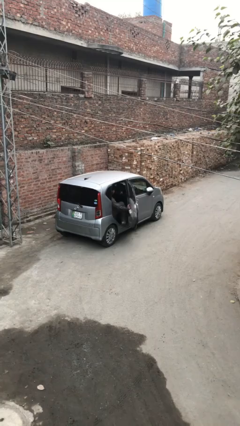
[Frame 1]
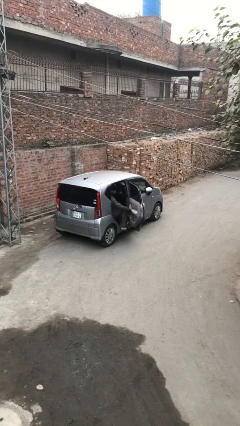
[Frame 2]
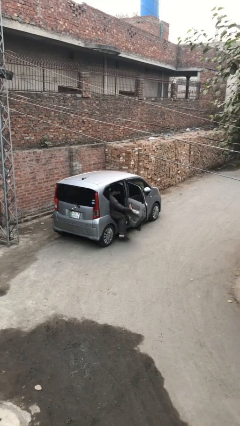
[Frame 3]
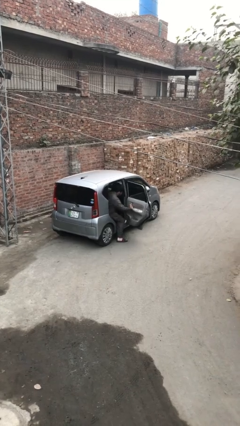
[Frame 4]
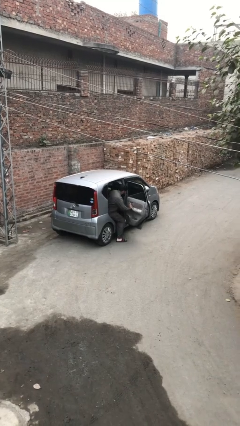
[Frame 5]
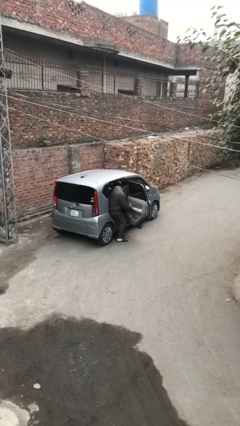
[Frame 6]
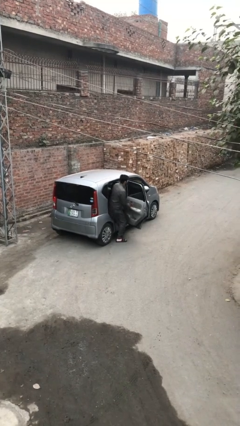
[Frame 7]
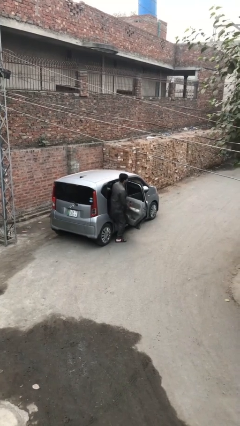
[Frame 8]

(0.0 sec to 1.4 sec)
person opens car door

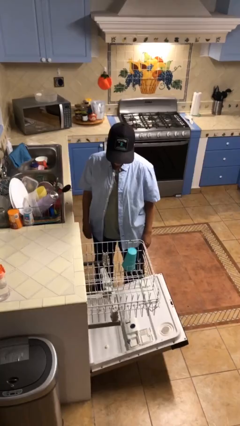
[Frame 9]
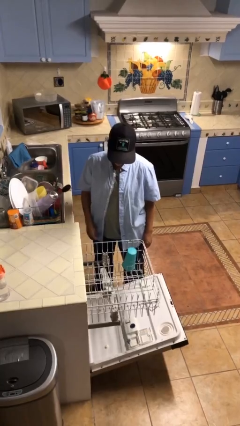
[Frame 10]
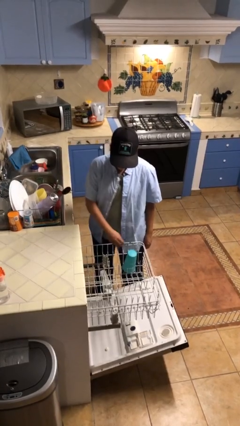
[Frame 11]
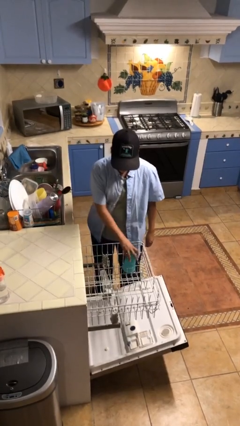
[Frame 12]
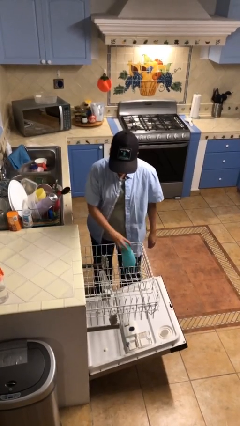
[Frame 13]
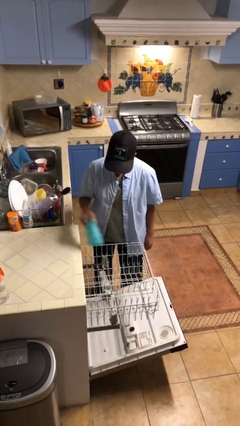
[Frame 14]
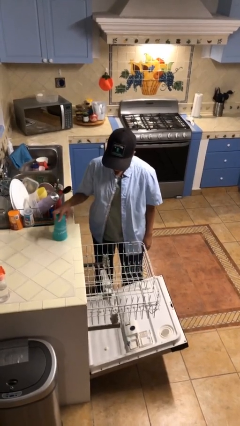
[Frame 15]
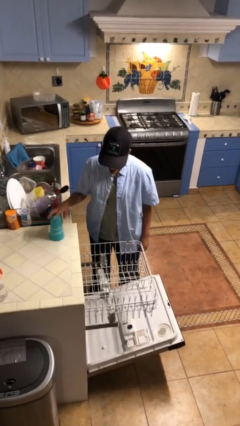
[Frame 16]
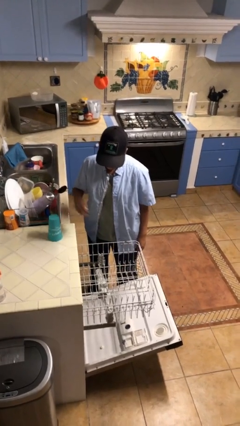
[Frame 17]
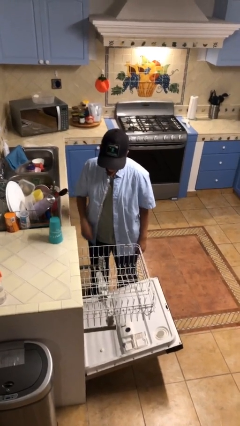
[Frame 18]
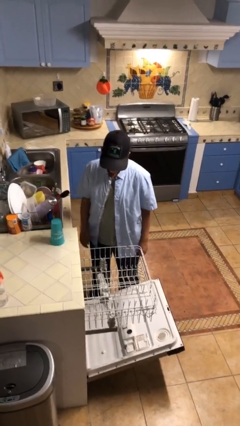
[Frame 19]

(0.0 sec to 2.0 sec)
person unloads dishwasher

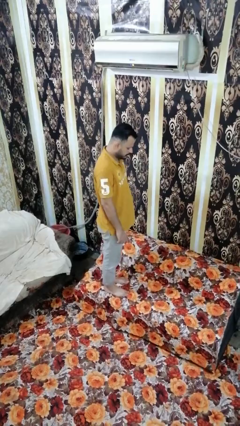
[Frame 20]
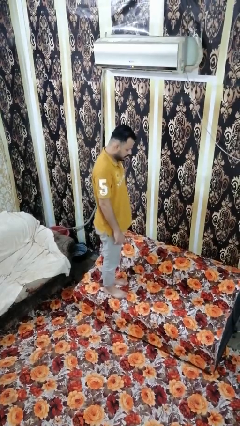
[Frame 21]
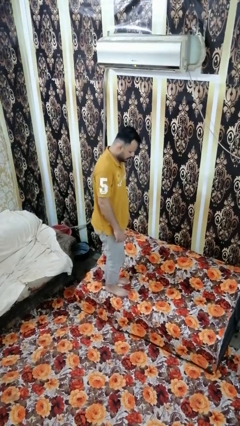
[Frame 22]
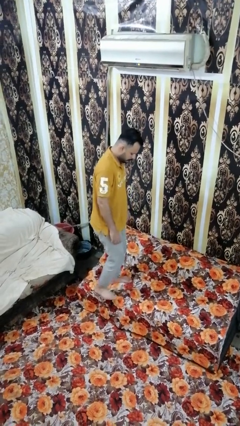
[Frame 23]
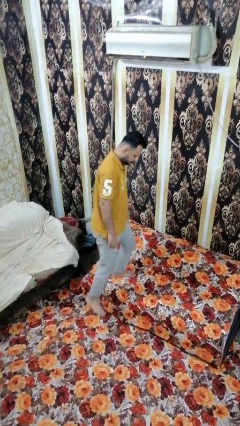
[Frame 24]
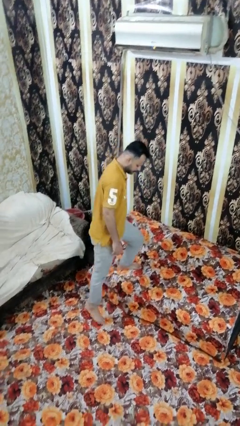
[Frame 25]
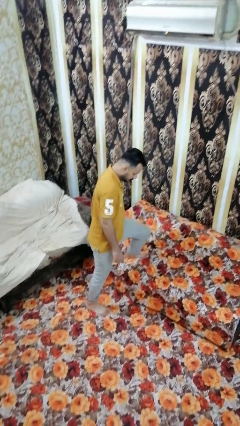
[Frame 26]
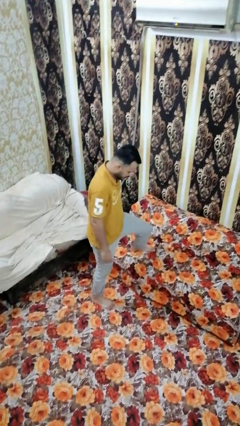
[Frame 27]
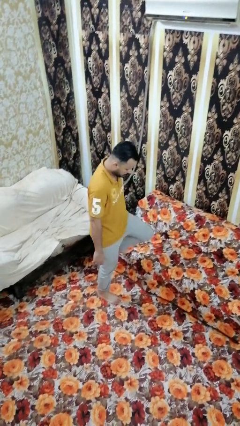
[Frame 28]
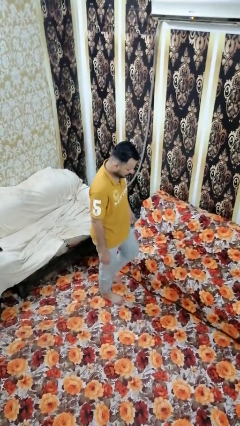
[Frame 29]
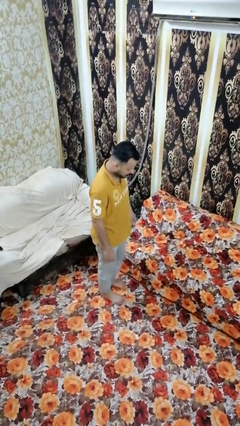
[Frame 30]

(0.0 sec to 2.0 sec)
person climbs off couch

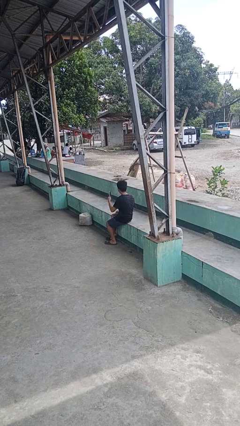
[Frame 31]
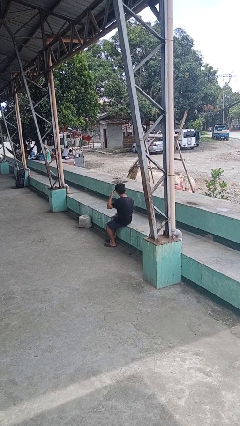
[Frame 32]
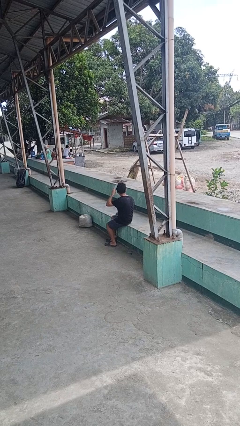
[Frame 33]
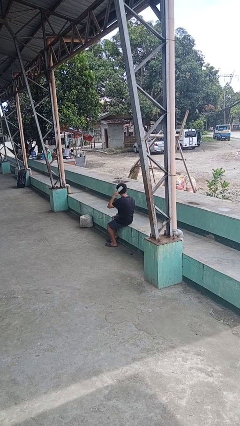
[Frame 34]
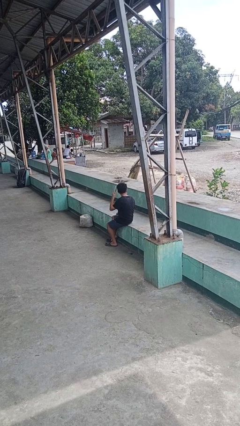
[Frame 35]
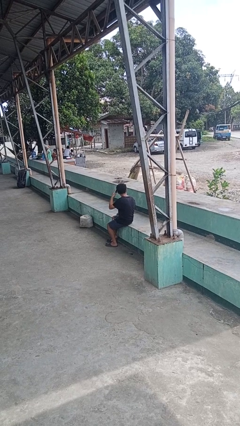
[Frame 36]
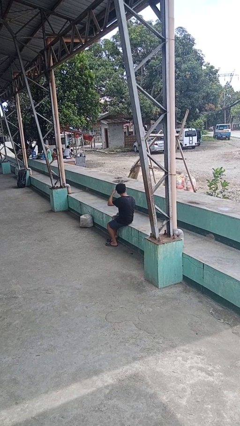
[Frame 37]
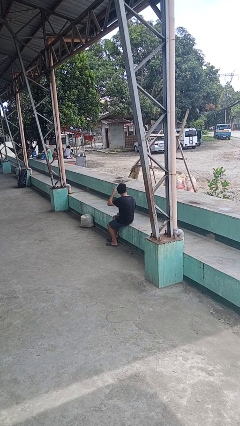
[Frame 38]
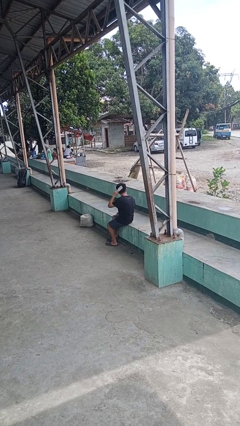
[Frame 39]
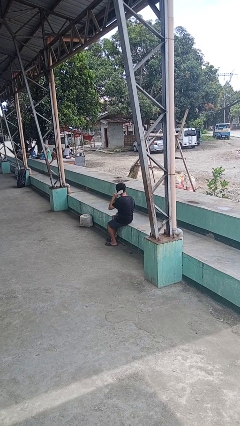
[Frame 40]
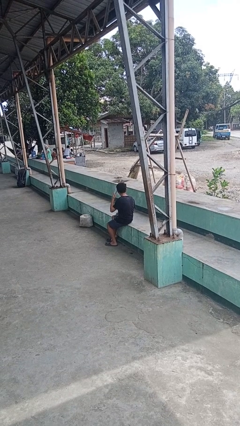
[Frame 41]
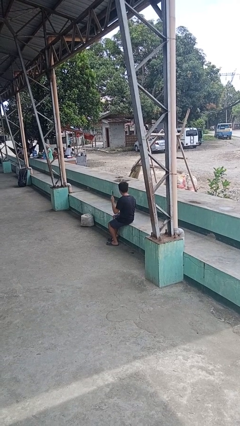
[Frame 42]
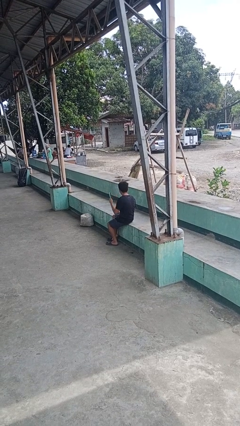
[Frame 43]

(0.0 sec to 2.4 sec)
person brushes hair

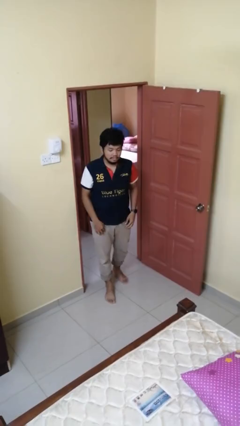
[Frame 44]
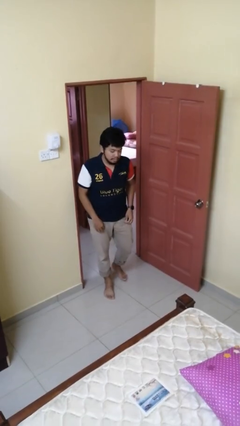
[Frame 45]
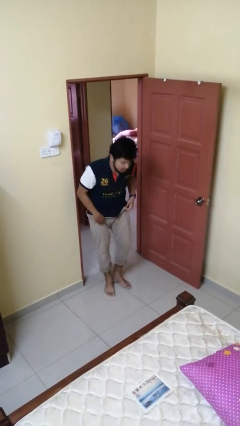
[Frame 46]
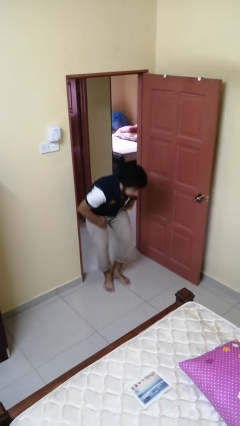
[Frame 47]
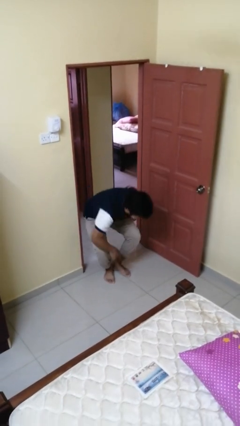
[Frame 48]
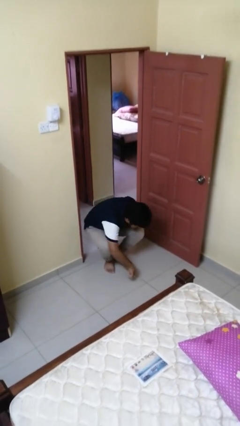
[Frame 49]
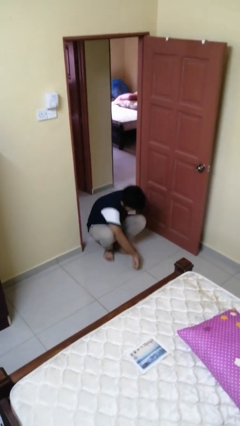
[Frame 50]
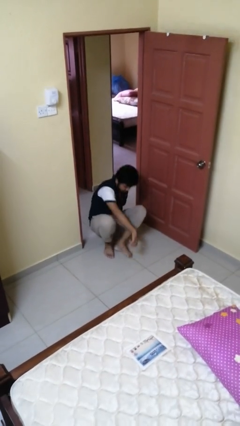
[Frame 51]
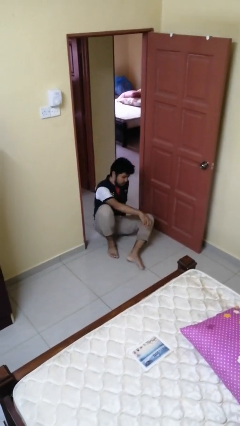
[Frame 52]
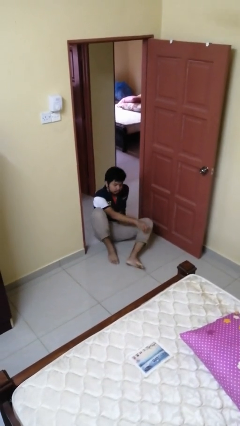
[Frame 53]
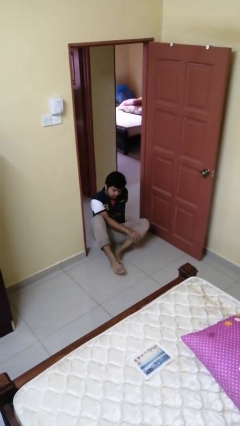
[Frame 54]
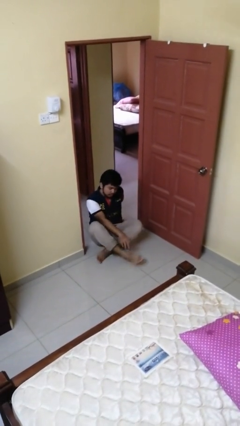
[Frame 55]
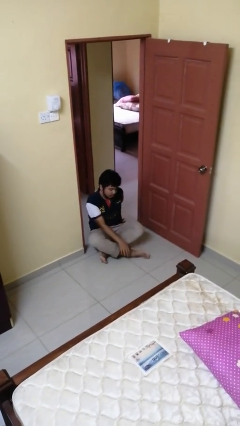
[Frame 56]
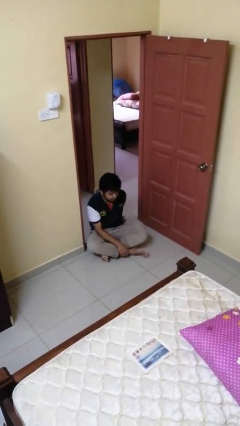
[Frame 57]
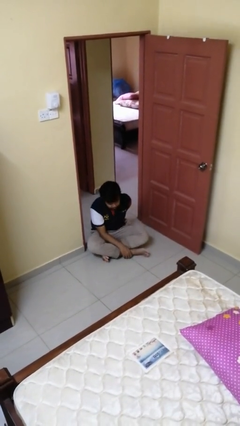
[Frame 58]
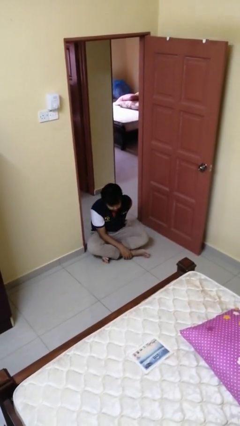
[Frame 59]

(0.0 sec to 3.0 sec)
person sits crisscross

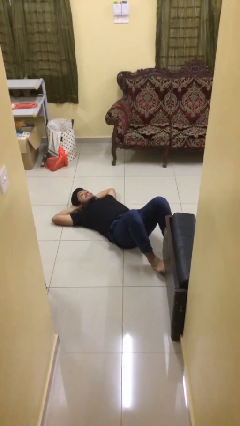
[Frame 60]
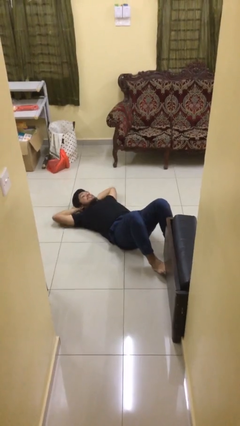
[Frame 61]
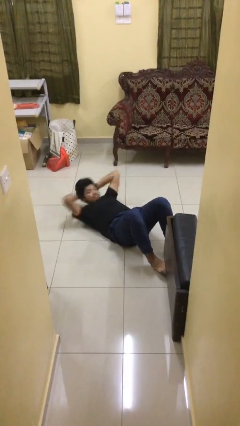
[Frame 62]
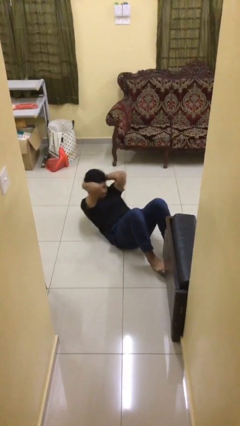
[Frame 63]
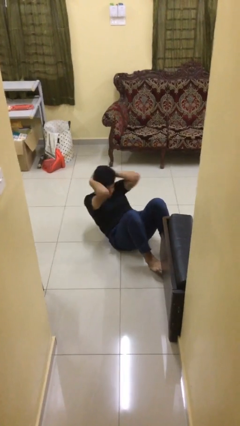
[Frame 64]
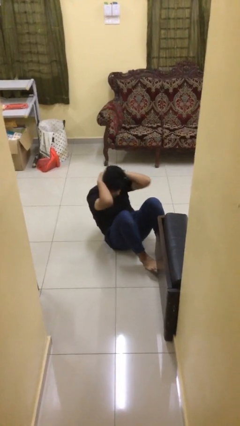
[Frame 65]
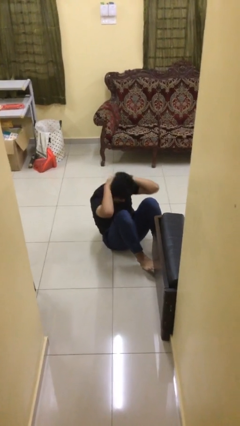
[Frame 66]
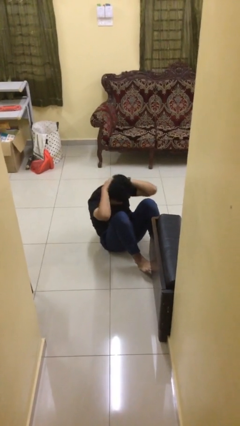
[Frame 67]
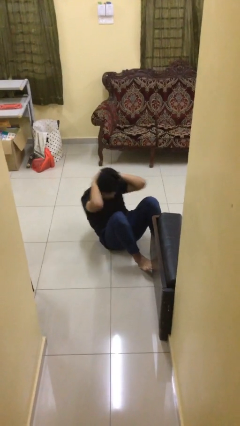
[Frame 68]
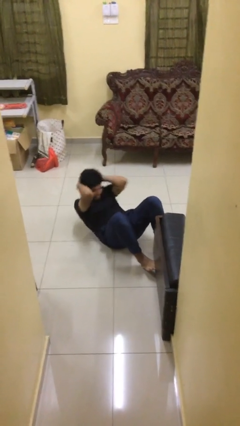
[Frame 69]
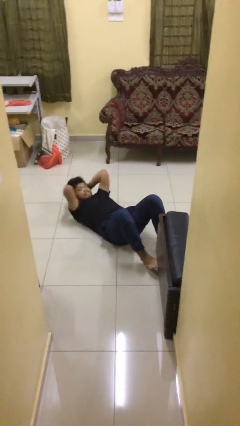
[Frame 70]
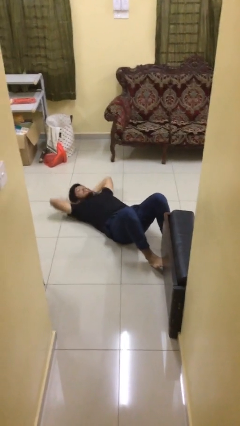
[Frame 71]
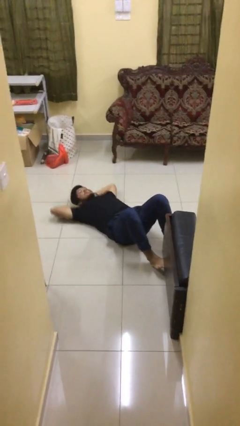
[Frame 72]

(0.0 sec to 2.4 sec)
person exercises with situp

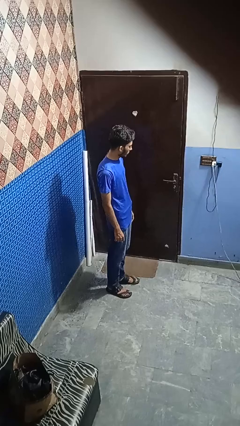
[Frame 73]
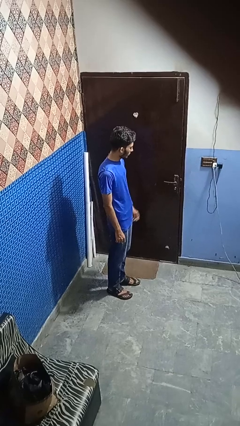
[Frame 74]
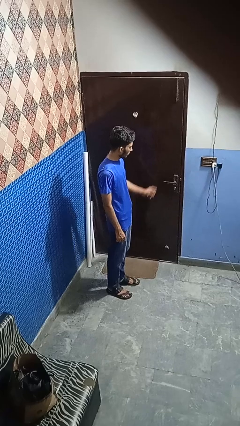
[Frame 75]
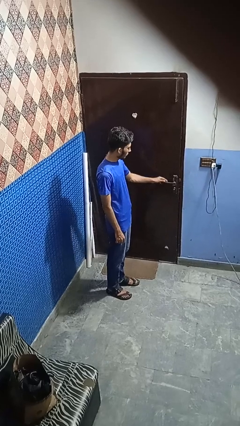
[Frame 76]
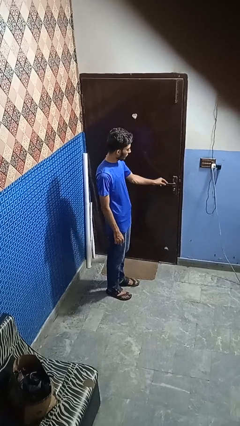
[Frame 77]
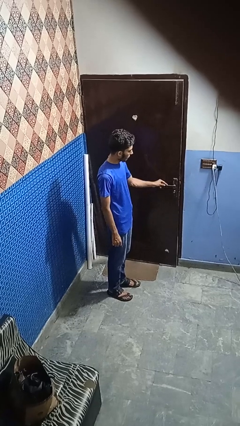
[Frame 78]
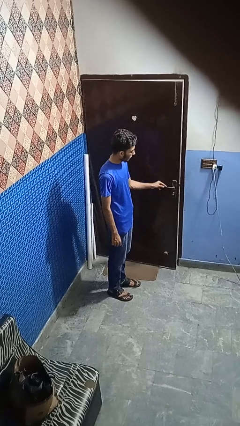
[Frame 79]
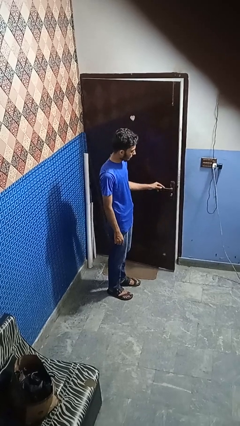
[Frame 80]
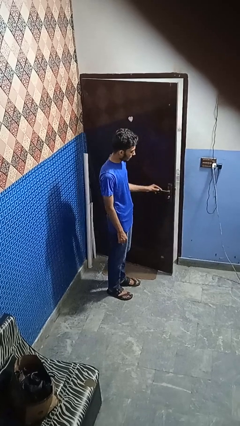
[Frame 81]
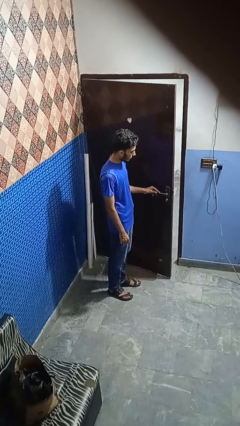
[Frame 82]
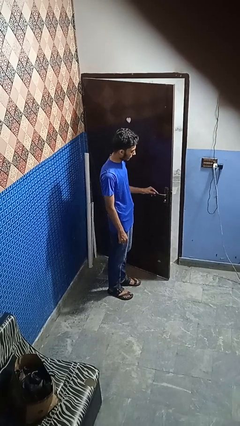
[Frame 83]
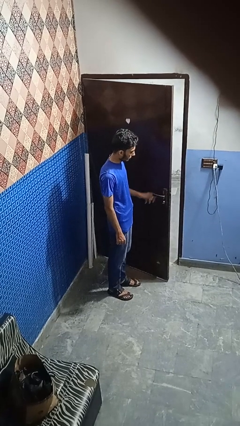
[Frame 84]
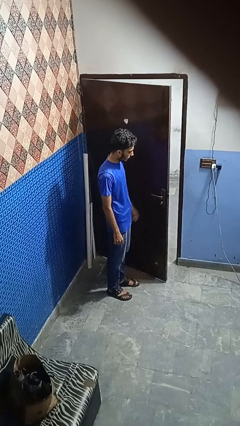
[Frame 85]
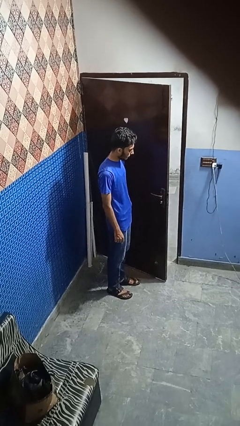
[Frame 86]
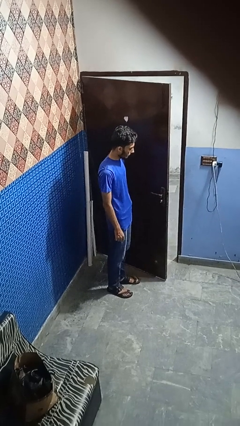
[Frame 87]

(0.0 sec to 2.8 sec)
person opens facility door

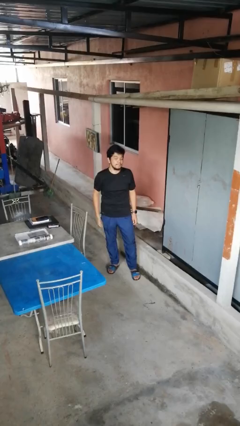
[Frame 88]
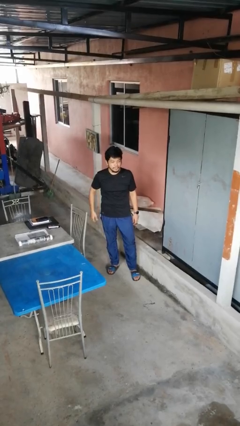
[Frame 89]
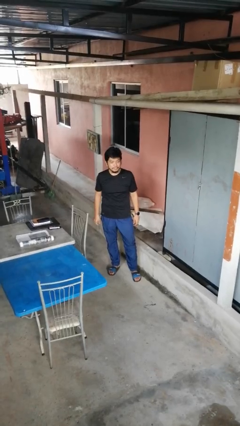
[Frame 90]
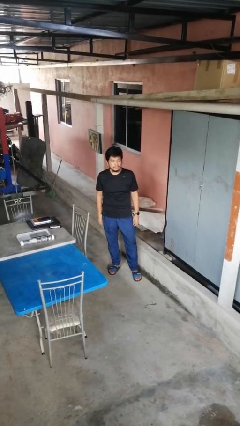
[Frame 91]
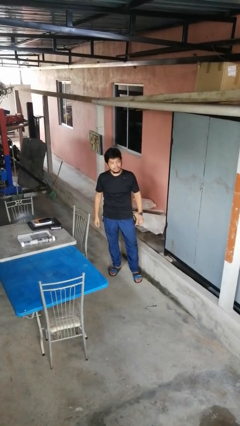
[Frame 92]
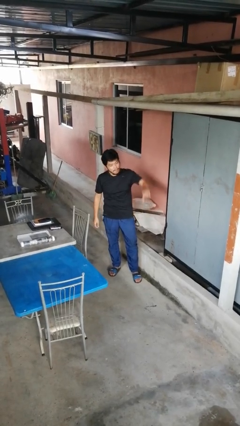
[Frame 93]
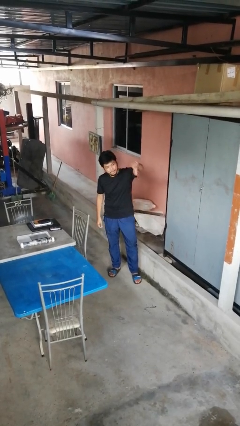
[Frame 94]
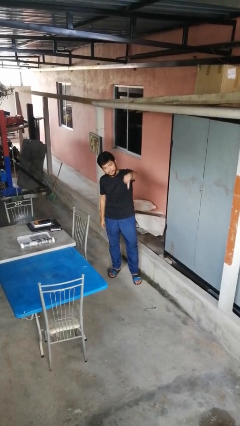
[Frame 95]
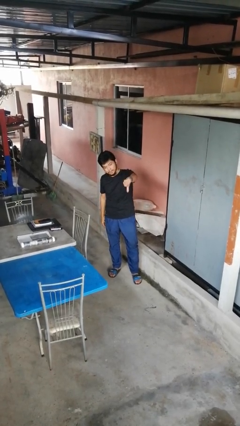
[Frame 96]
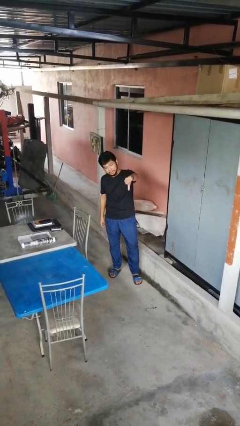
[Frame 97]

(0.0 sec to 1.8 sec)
person closes gate
